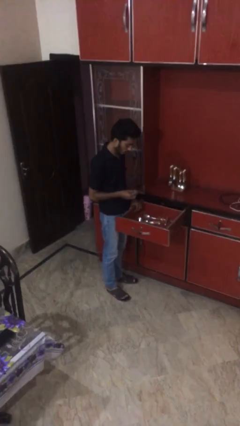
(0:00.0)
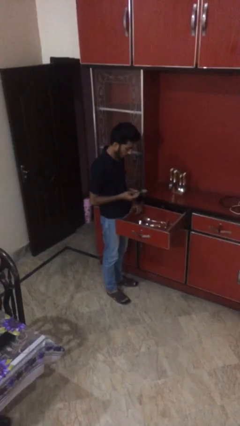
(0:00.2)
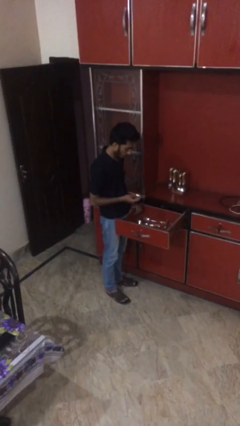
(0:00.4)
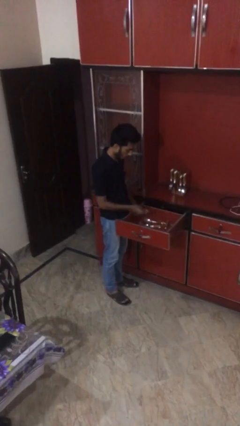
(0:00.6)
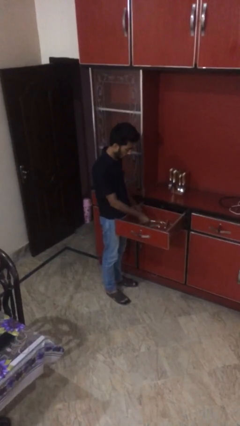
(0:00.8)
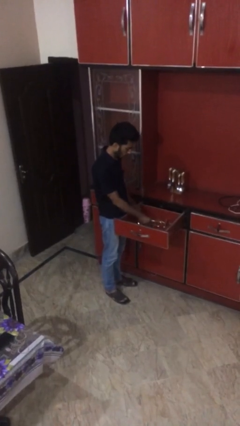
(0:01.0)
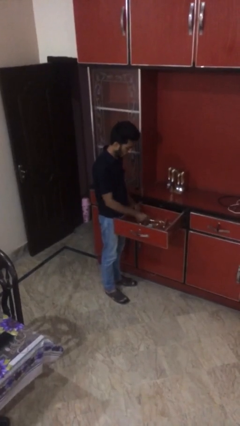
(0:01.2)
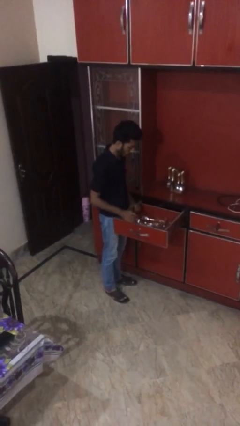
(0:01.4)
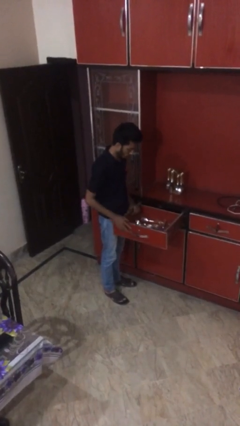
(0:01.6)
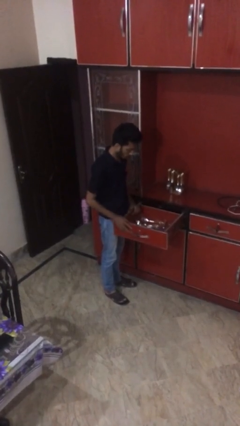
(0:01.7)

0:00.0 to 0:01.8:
person puts object into kitchen drawer

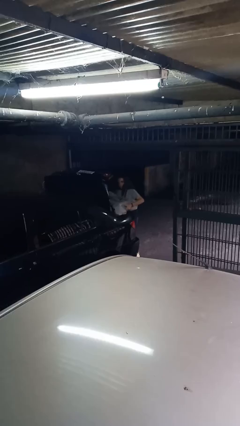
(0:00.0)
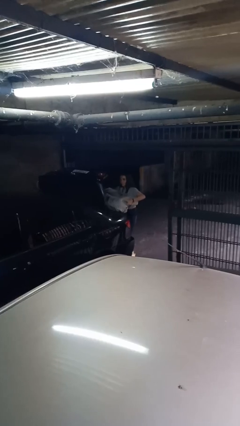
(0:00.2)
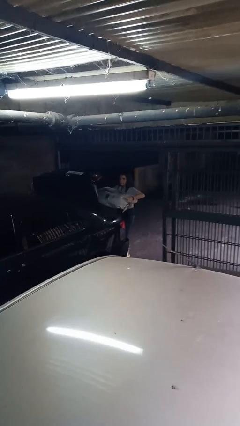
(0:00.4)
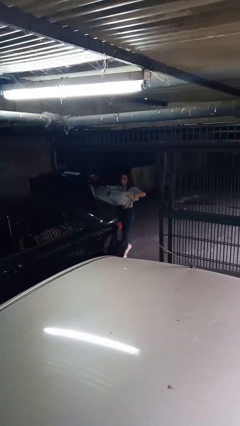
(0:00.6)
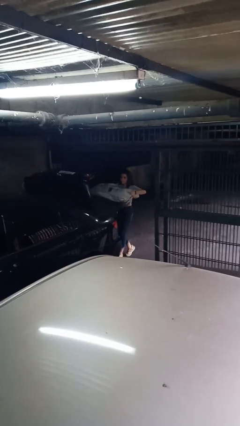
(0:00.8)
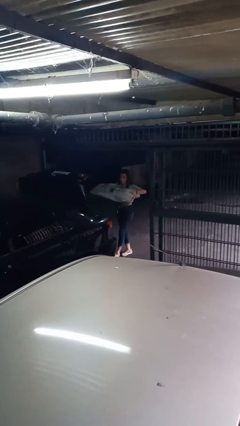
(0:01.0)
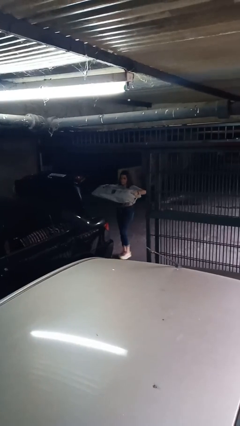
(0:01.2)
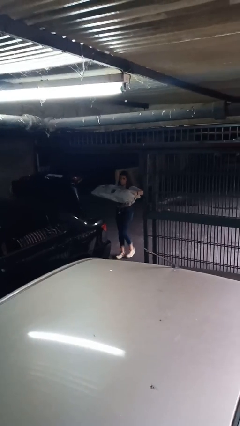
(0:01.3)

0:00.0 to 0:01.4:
person unloads car

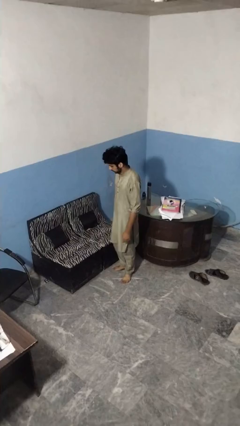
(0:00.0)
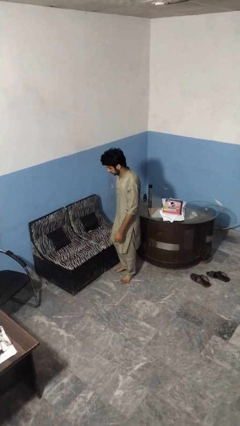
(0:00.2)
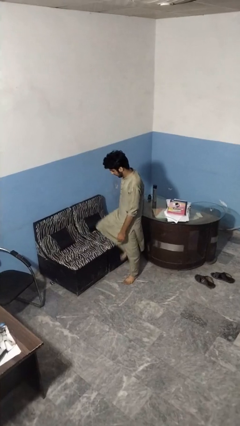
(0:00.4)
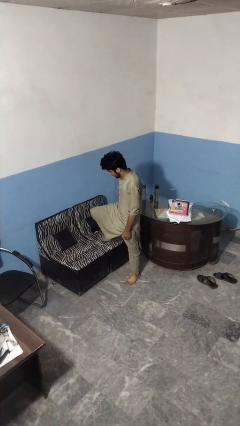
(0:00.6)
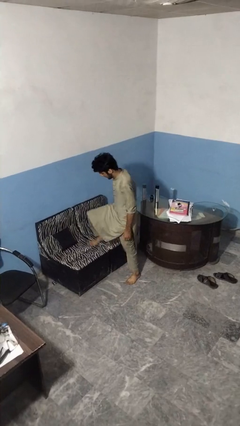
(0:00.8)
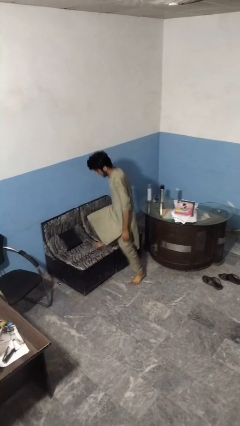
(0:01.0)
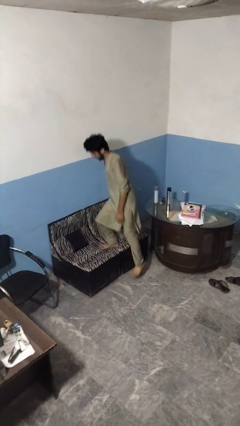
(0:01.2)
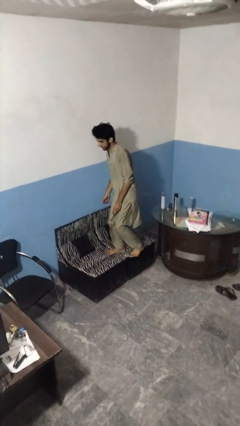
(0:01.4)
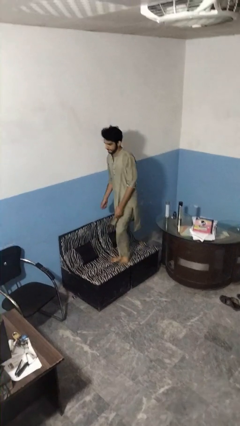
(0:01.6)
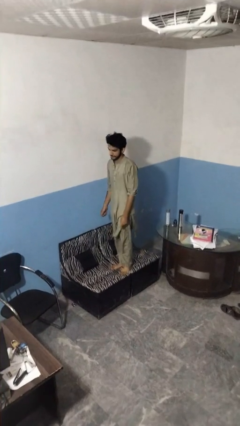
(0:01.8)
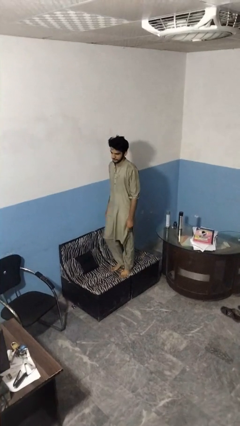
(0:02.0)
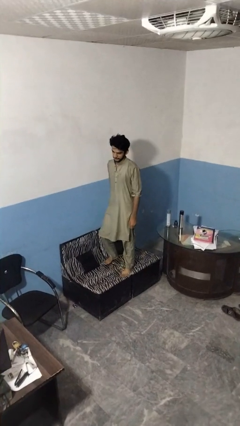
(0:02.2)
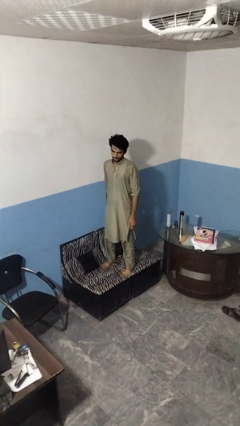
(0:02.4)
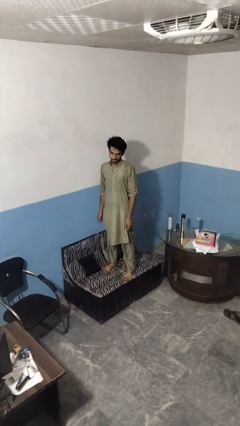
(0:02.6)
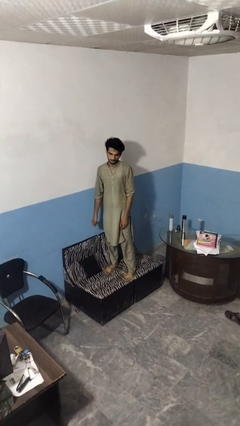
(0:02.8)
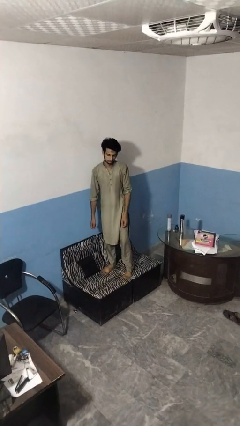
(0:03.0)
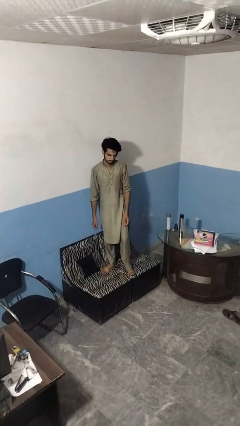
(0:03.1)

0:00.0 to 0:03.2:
person climbs on couch

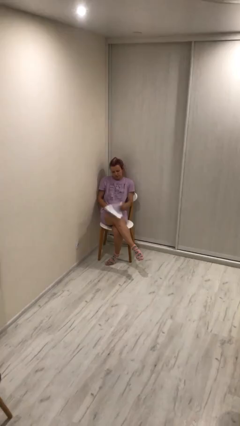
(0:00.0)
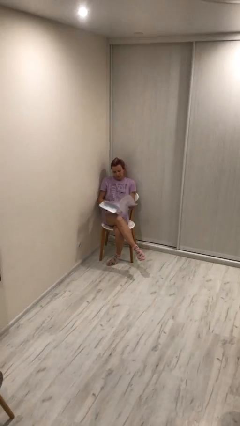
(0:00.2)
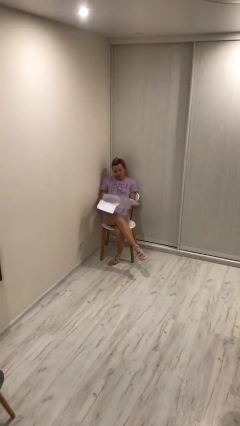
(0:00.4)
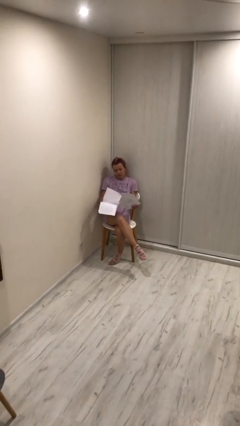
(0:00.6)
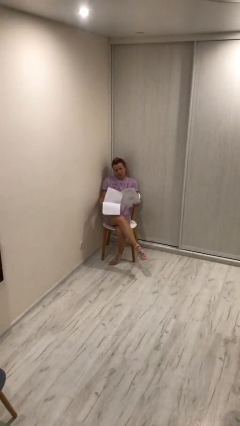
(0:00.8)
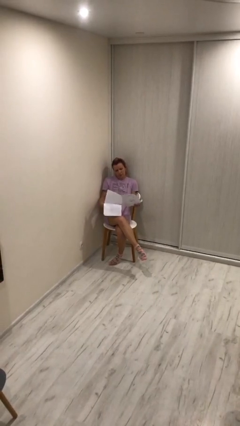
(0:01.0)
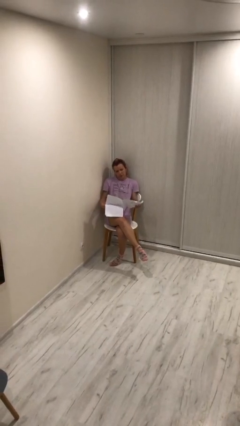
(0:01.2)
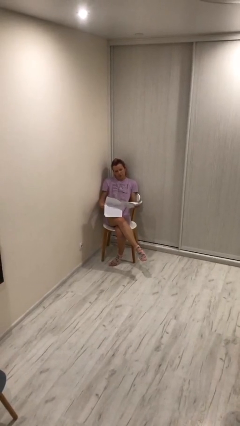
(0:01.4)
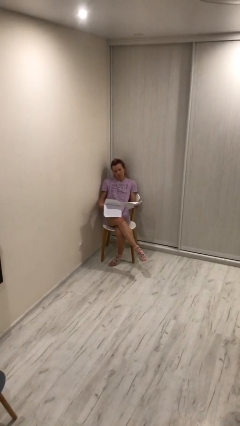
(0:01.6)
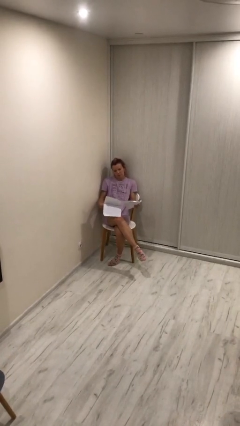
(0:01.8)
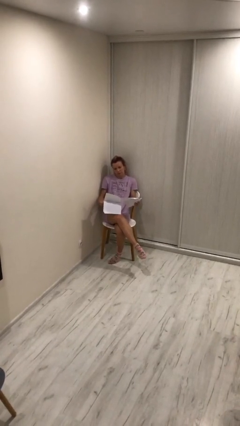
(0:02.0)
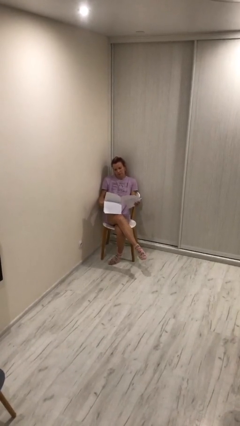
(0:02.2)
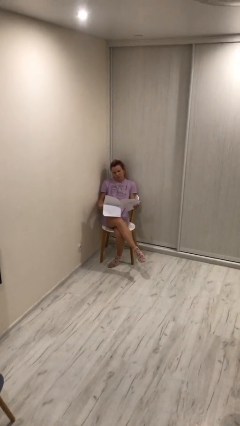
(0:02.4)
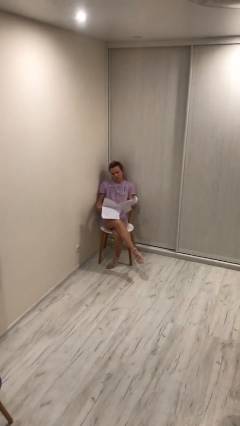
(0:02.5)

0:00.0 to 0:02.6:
person reads newspaper

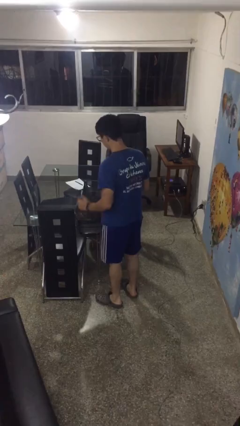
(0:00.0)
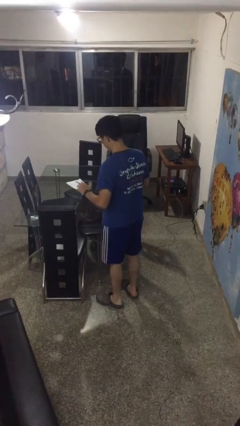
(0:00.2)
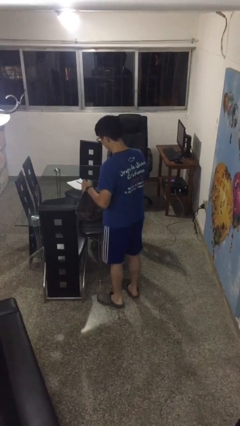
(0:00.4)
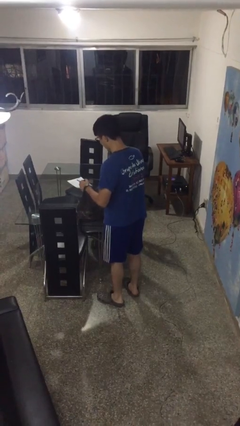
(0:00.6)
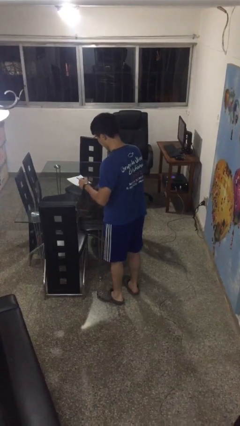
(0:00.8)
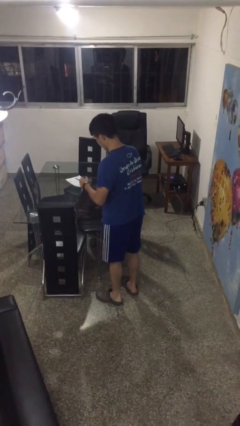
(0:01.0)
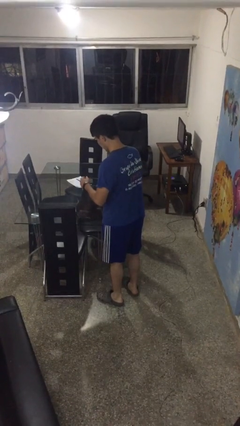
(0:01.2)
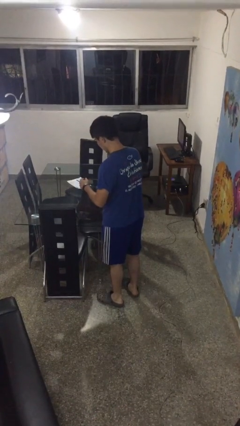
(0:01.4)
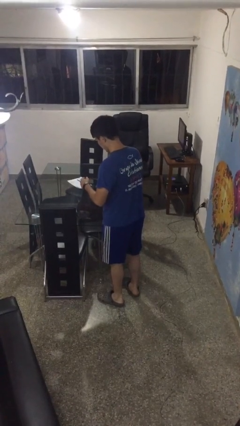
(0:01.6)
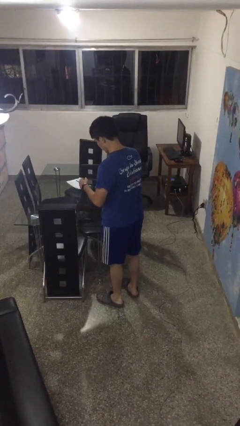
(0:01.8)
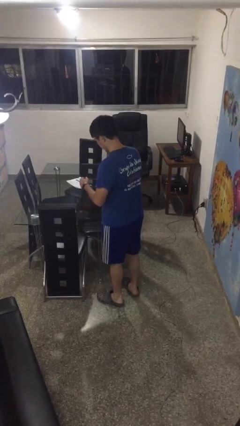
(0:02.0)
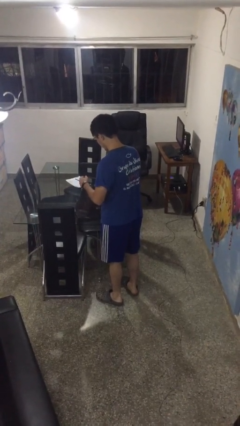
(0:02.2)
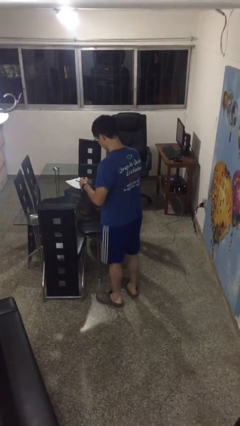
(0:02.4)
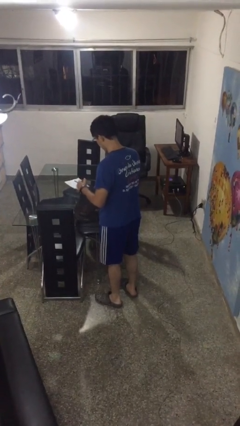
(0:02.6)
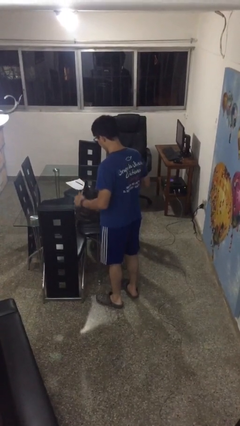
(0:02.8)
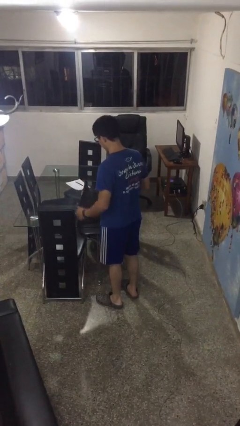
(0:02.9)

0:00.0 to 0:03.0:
person searches in bag

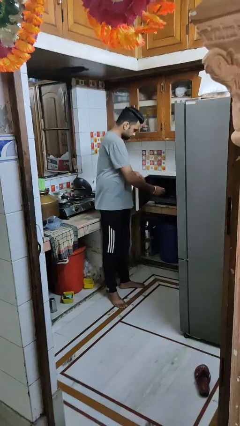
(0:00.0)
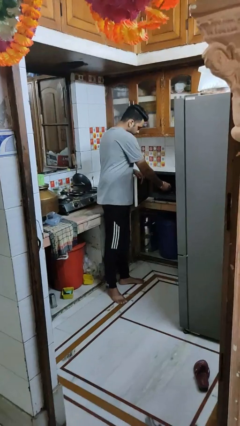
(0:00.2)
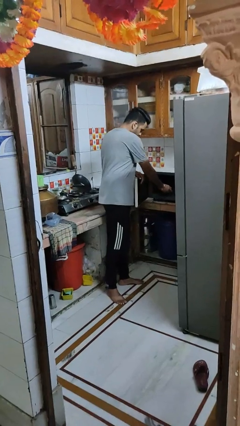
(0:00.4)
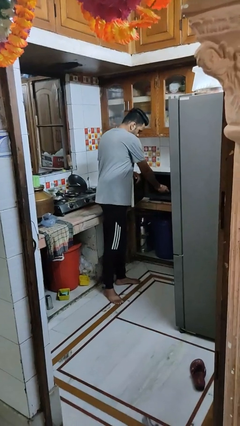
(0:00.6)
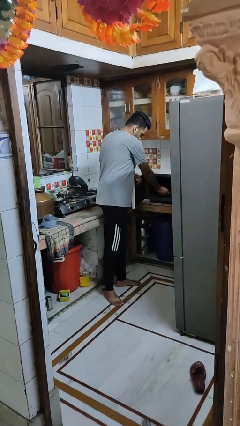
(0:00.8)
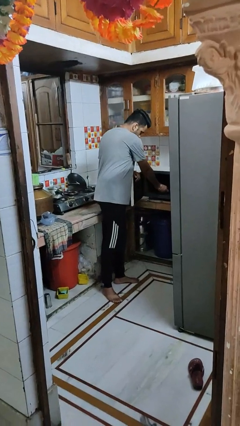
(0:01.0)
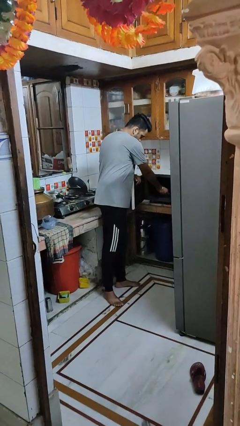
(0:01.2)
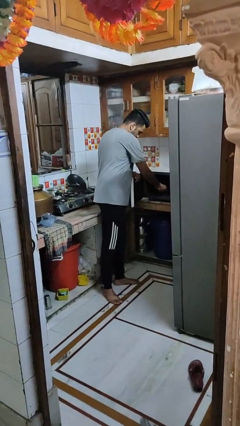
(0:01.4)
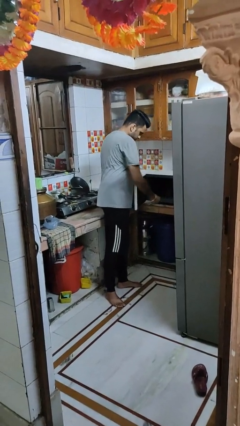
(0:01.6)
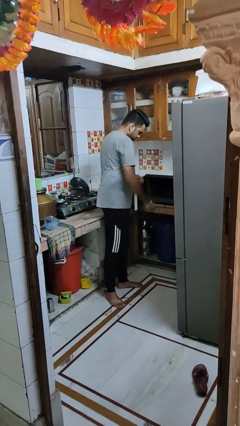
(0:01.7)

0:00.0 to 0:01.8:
person puts object into microwave

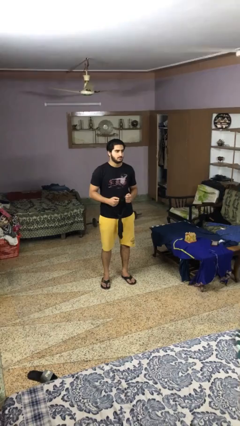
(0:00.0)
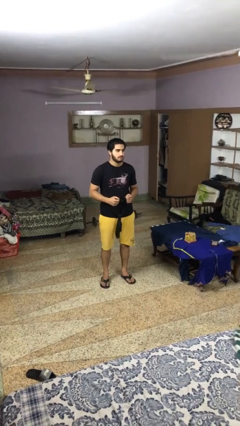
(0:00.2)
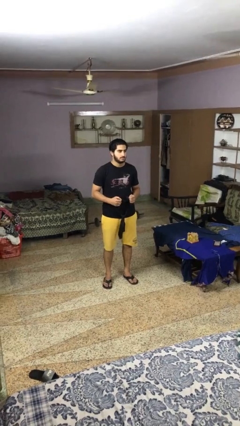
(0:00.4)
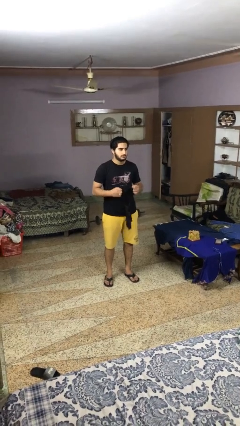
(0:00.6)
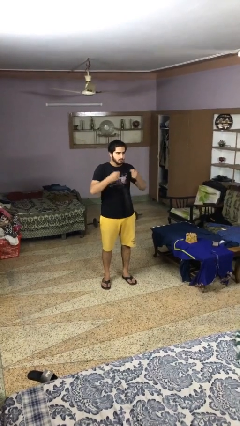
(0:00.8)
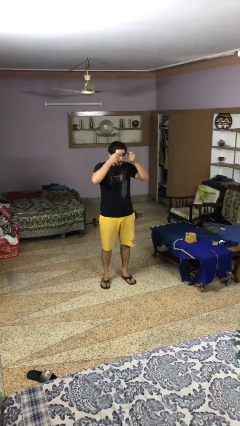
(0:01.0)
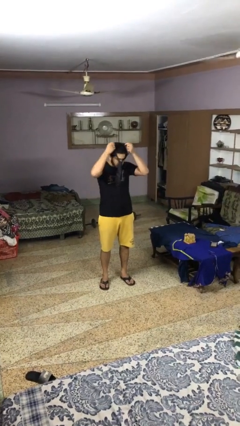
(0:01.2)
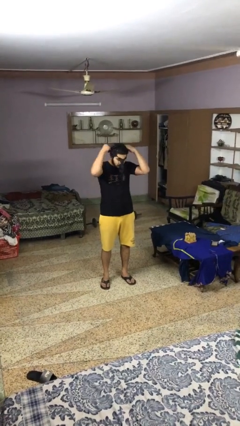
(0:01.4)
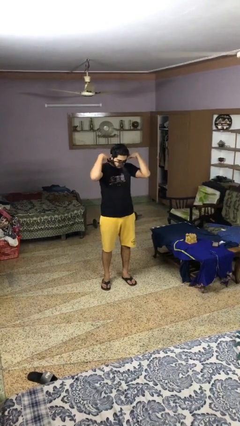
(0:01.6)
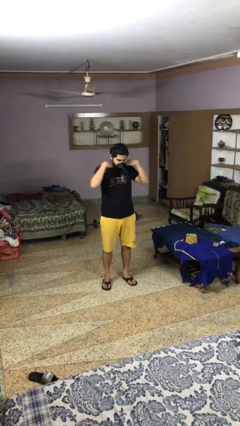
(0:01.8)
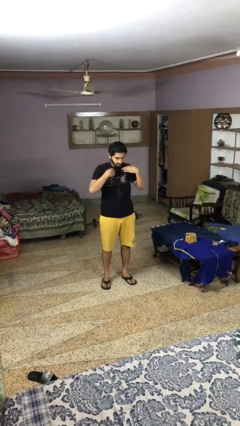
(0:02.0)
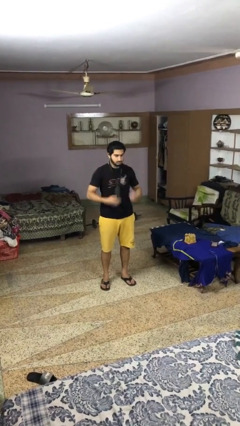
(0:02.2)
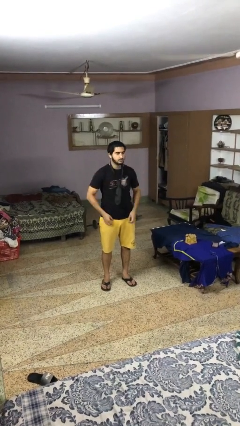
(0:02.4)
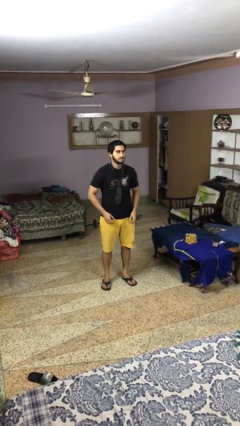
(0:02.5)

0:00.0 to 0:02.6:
person puts on necktie

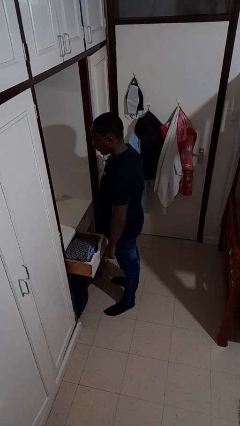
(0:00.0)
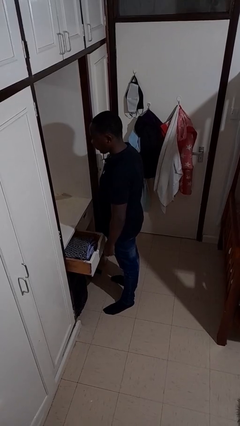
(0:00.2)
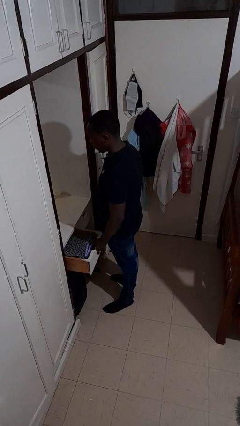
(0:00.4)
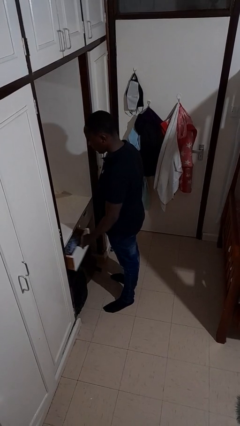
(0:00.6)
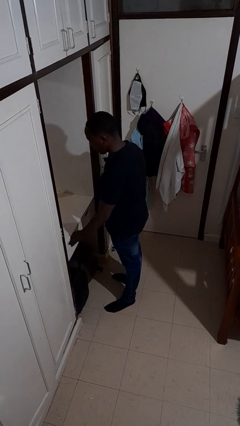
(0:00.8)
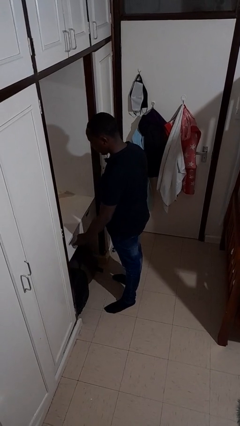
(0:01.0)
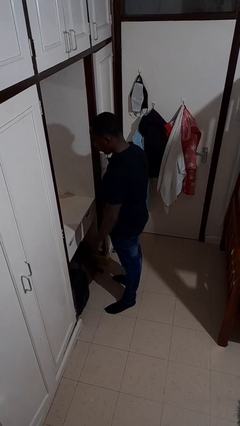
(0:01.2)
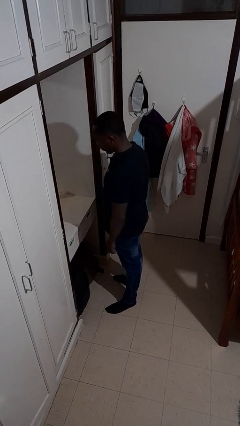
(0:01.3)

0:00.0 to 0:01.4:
person closes dresser drawer
